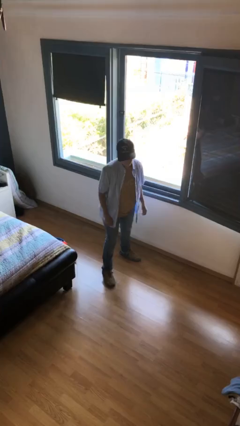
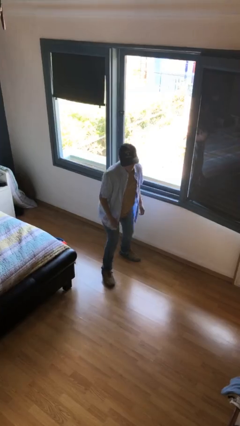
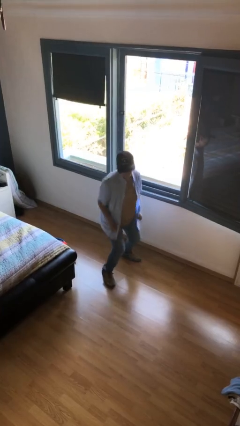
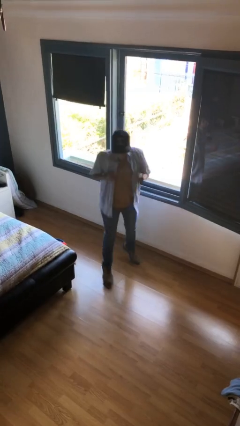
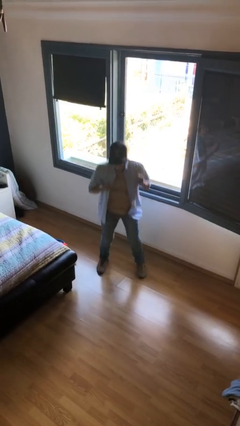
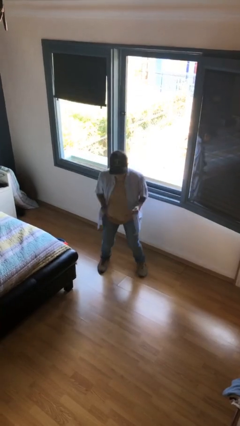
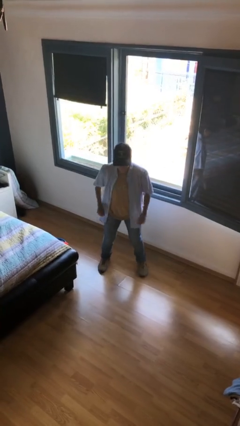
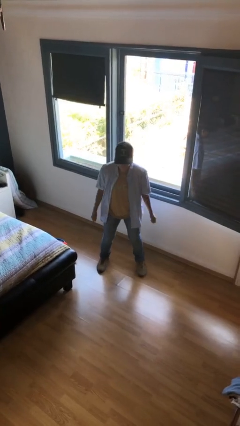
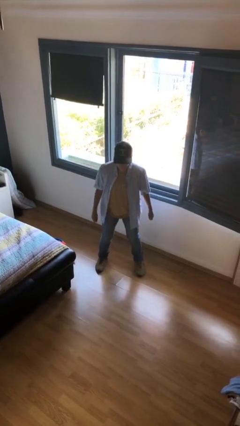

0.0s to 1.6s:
person jumps

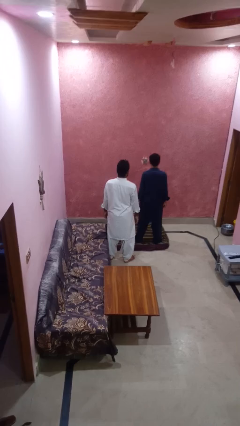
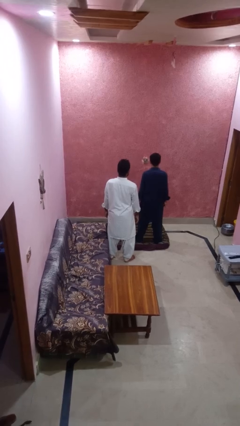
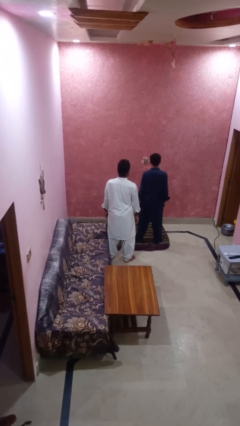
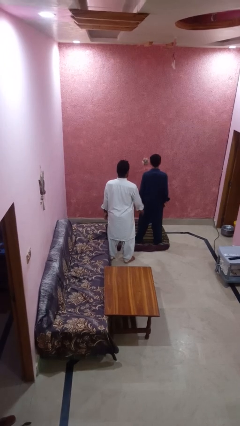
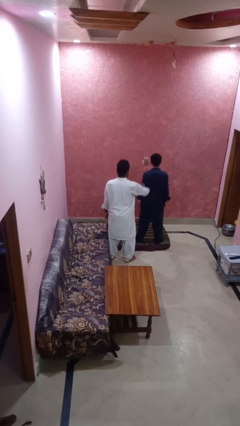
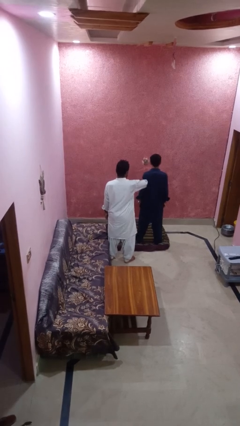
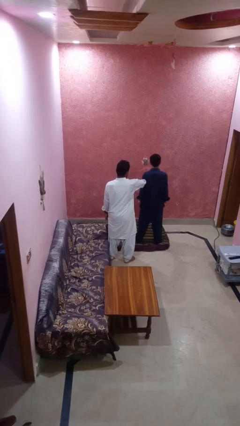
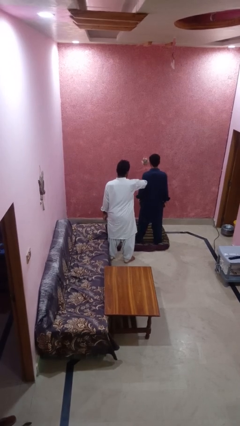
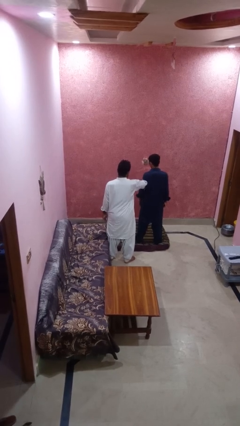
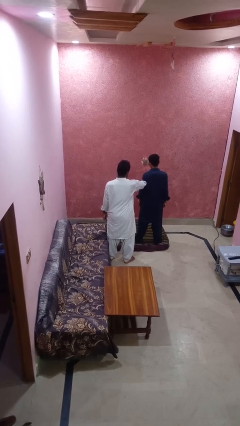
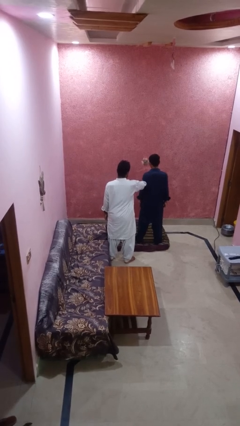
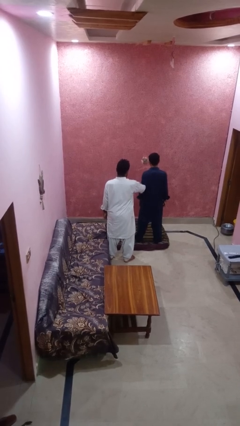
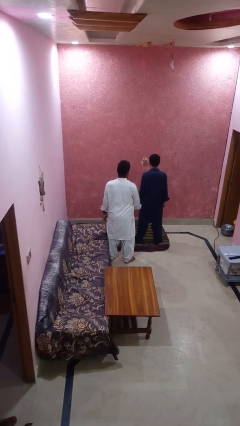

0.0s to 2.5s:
person grabs person by forearm

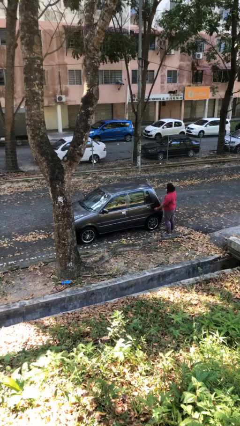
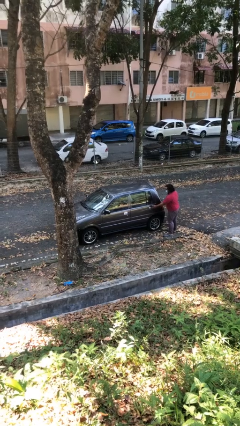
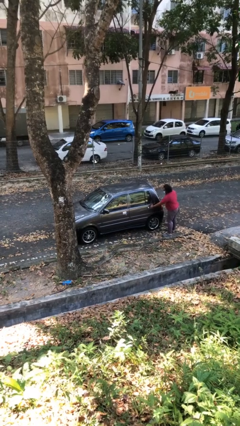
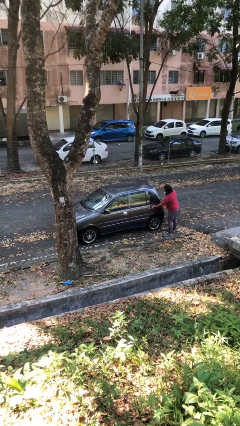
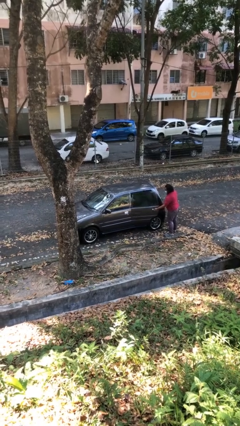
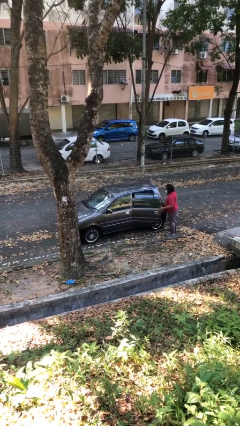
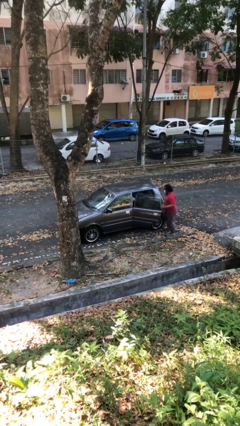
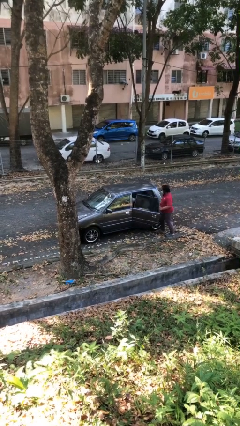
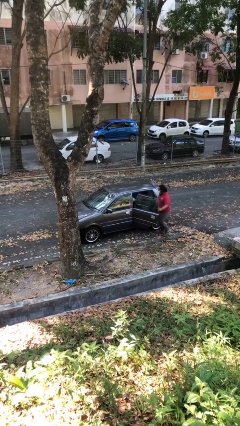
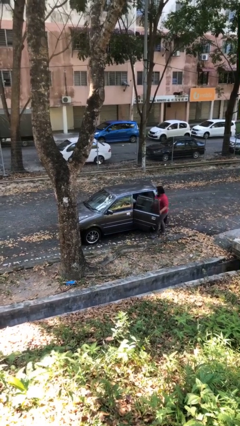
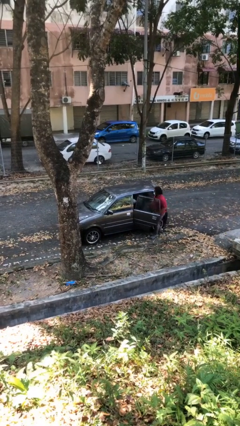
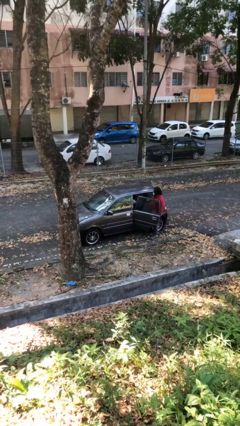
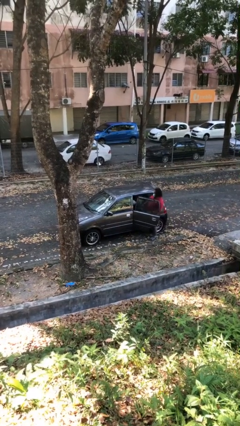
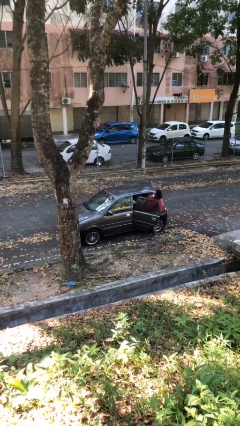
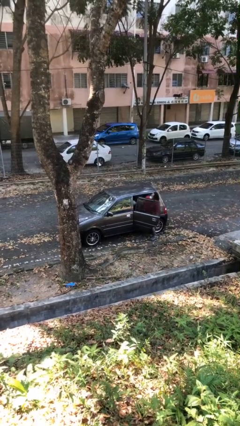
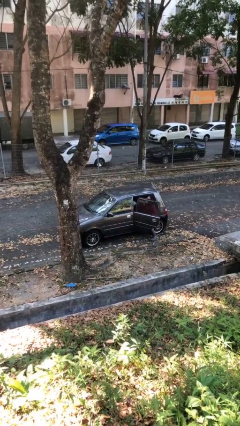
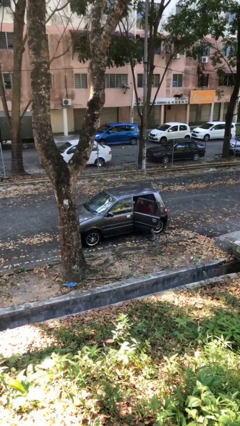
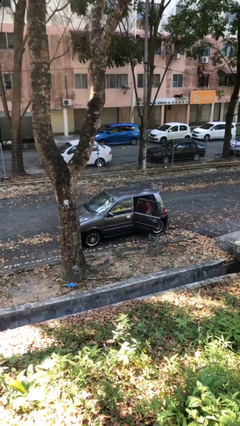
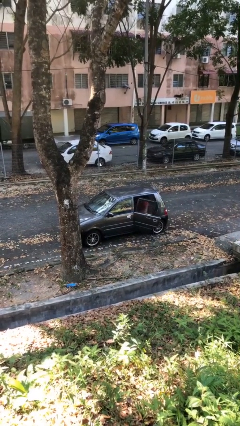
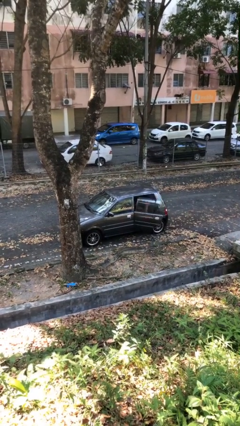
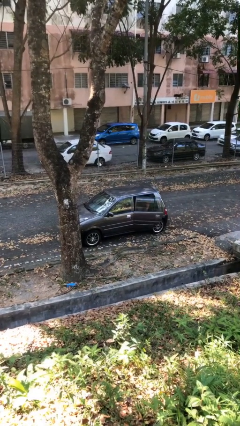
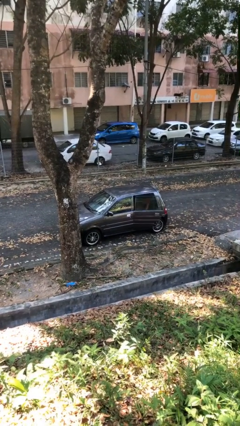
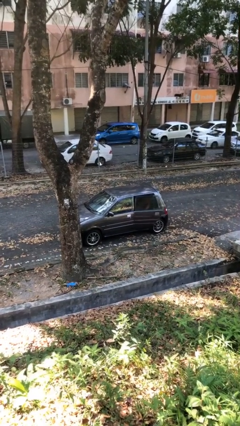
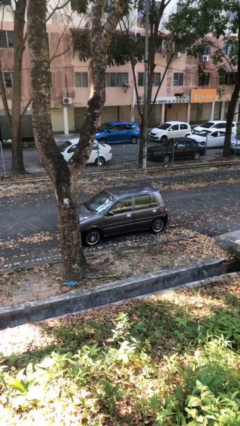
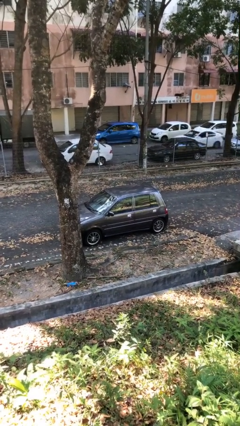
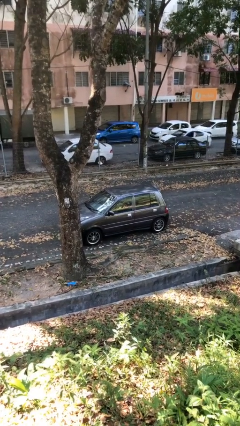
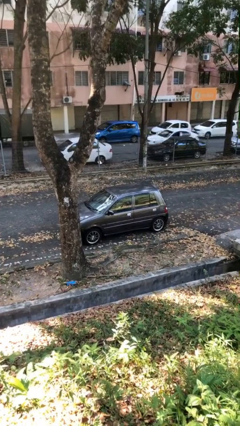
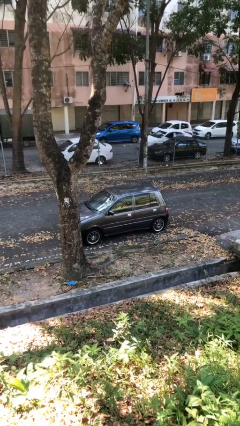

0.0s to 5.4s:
car picks up person

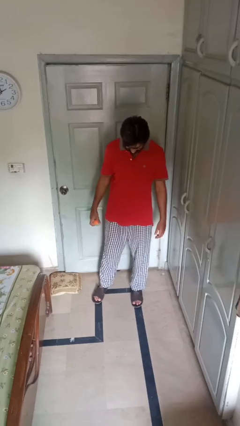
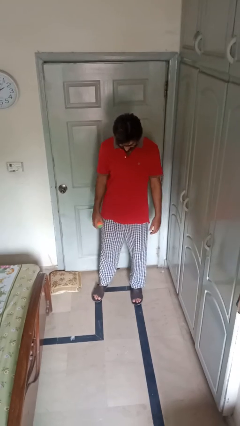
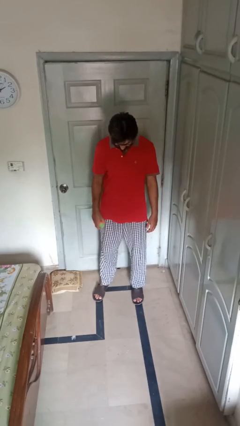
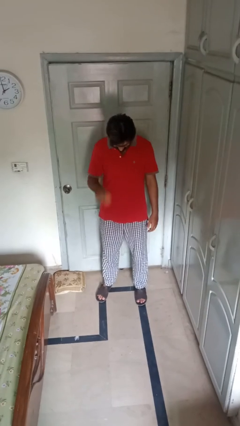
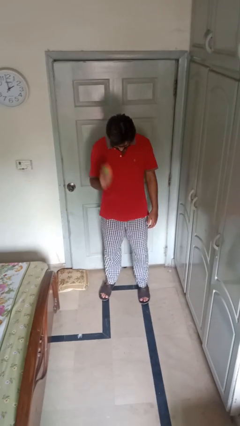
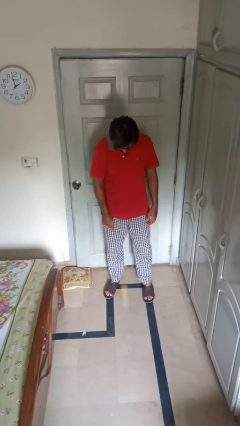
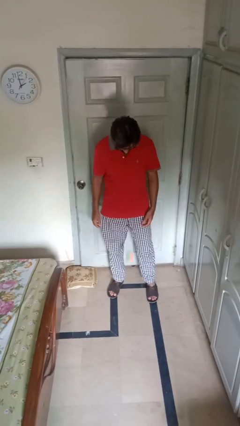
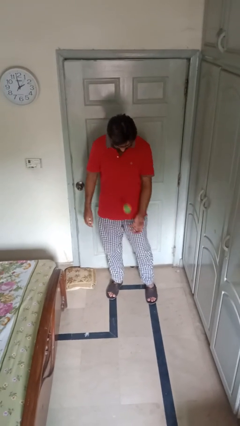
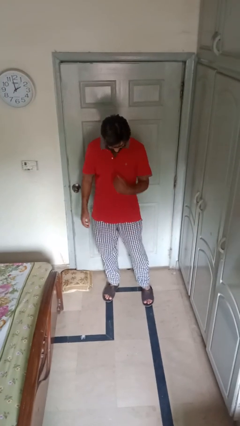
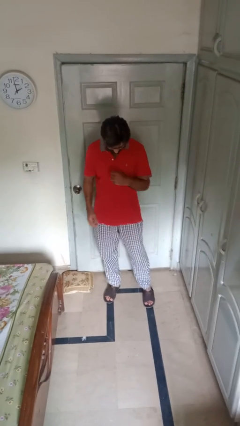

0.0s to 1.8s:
person bounces ball on floor

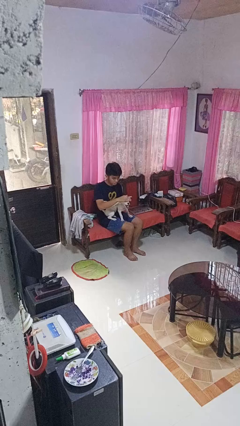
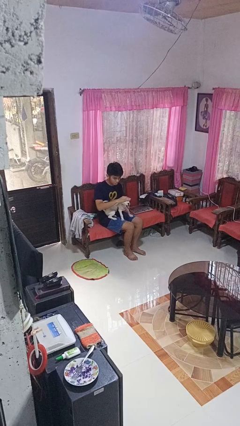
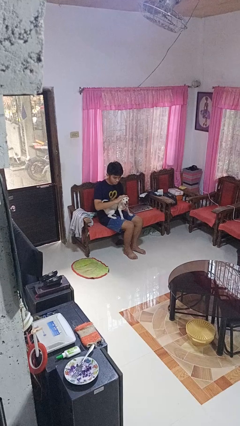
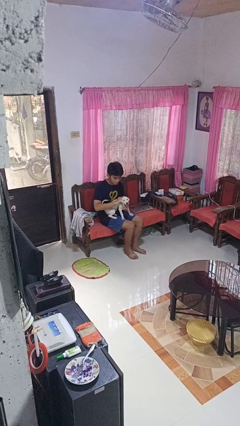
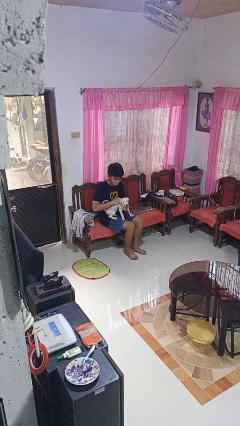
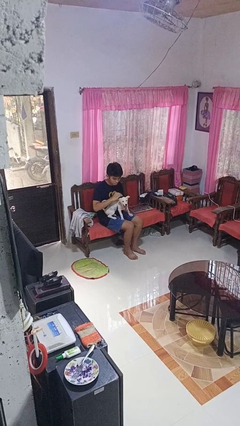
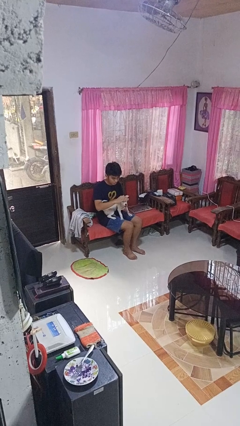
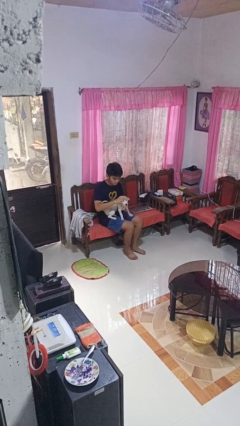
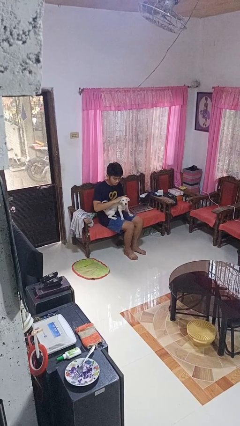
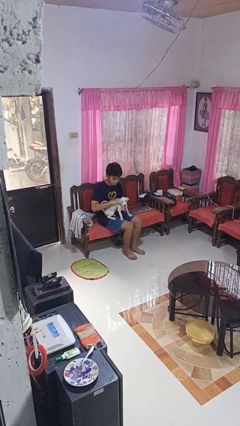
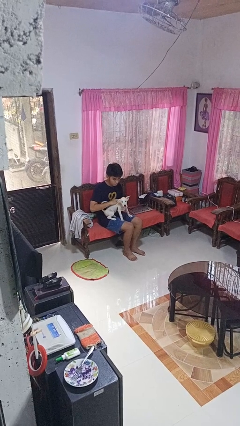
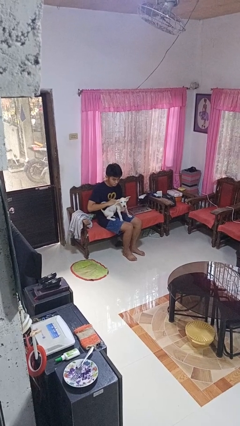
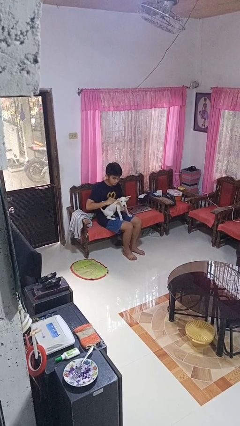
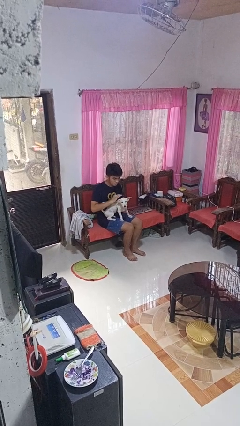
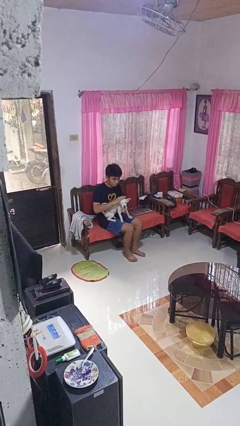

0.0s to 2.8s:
person pets dog

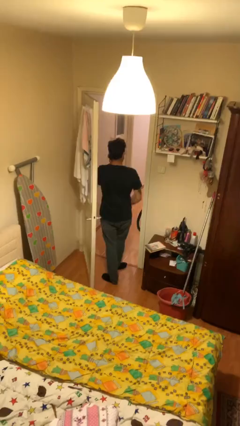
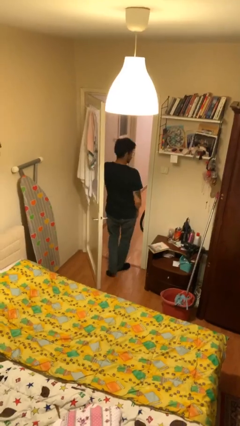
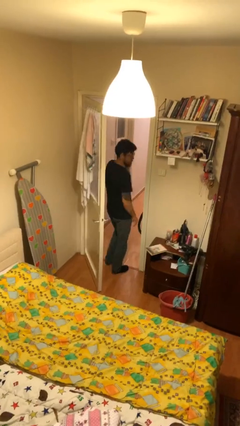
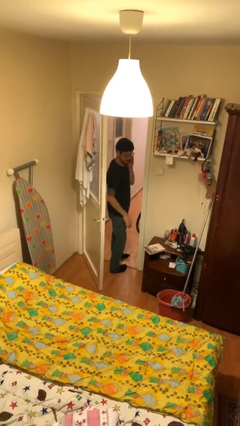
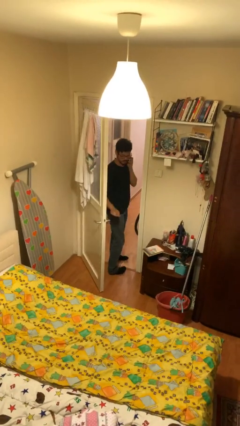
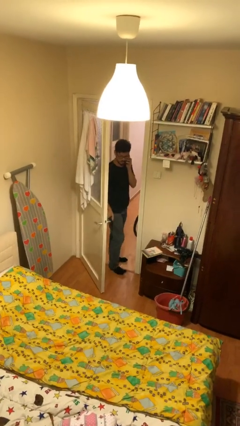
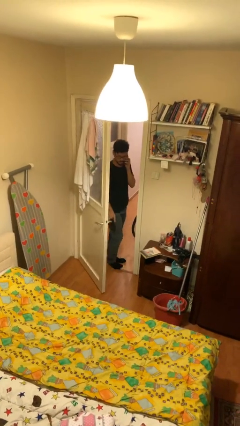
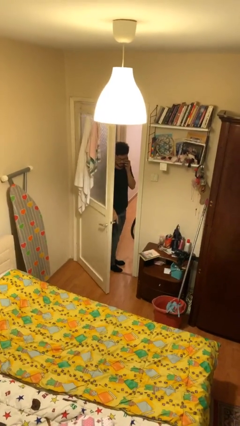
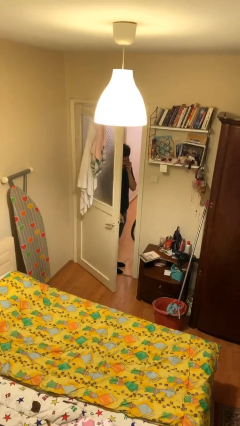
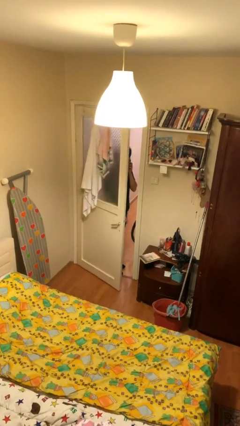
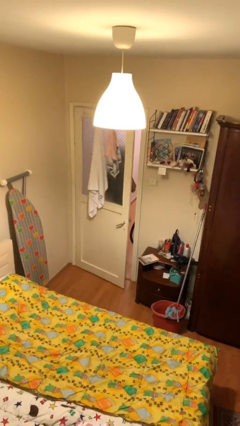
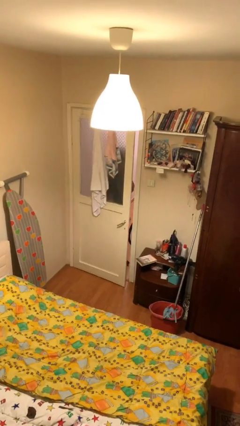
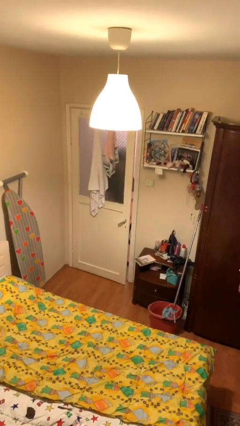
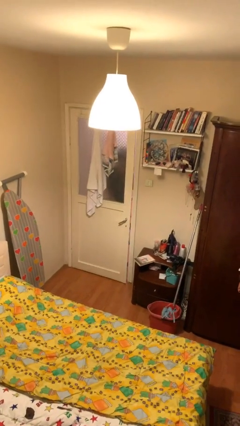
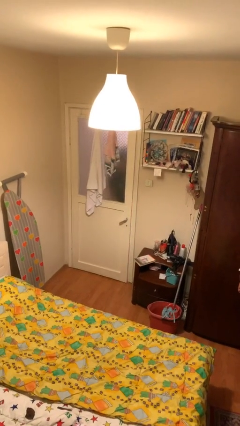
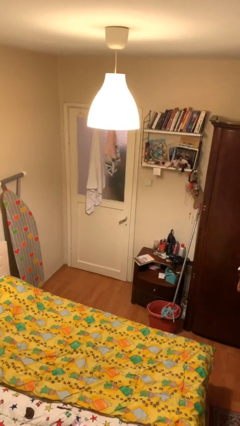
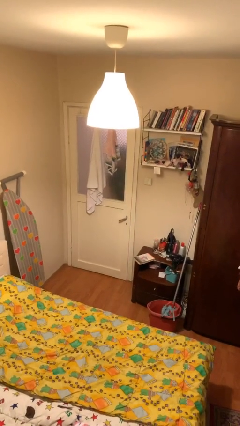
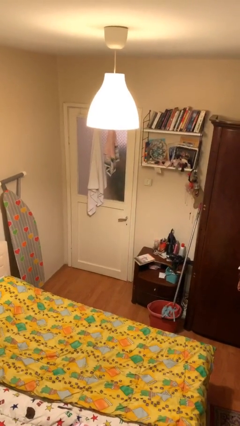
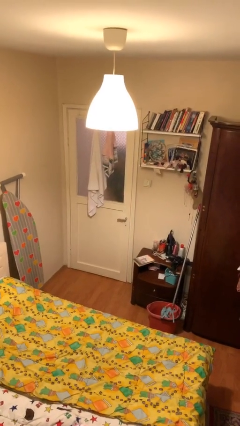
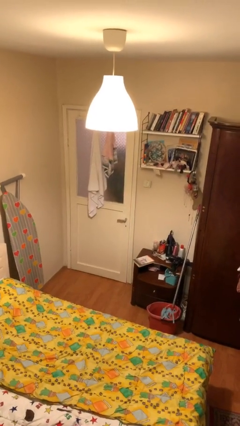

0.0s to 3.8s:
person closes facility door
